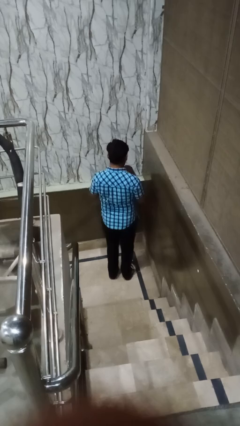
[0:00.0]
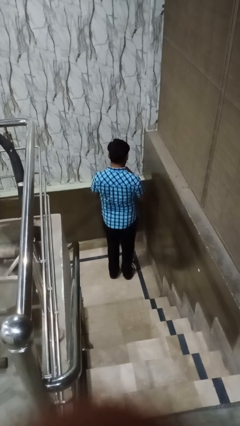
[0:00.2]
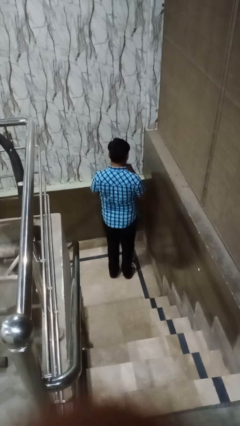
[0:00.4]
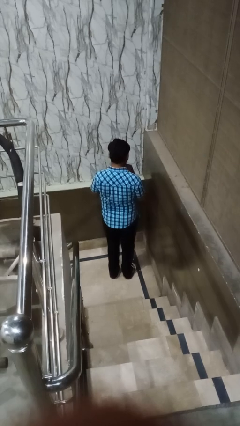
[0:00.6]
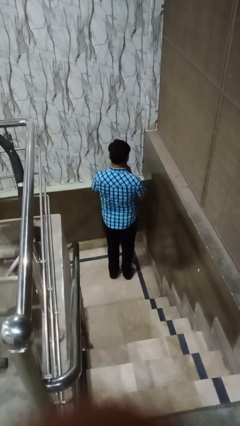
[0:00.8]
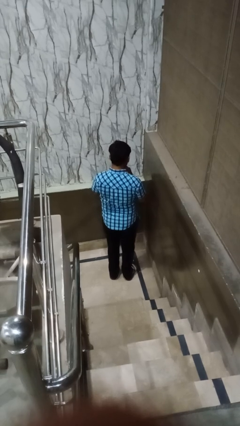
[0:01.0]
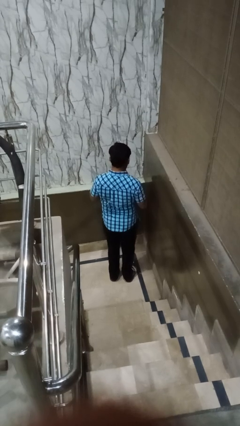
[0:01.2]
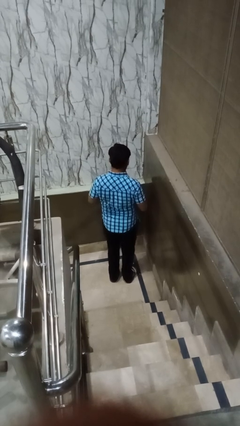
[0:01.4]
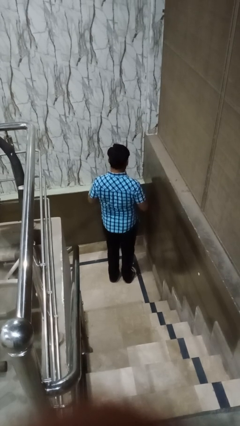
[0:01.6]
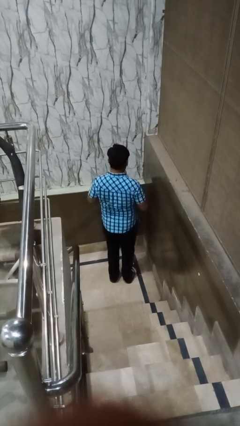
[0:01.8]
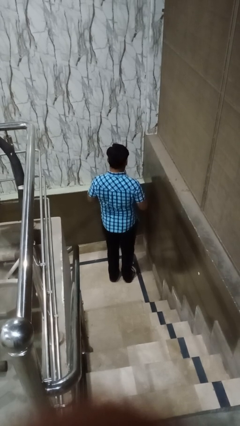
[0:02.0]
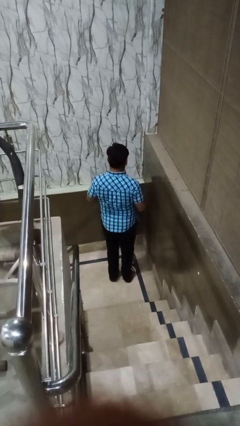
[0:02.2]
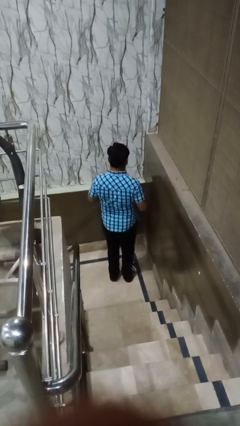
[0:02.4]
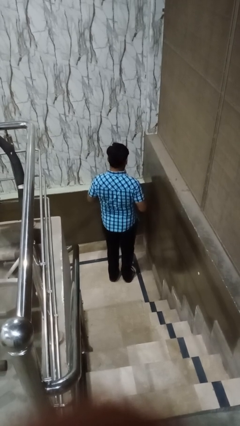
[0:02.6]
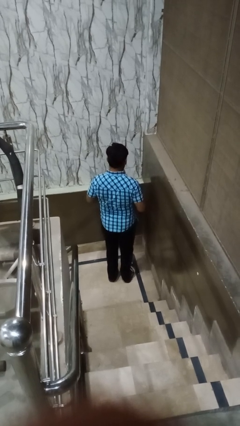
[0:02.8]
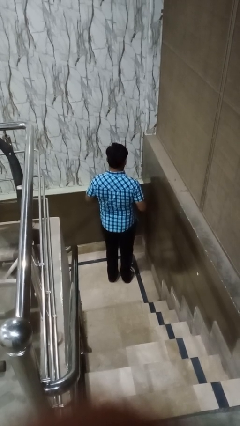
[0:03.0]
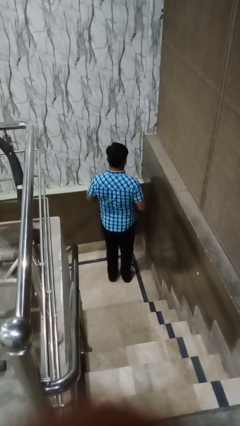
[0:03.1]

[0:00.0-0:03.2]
person buttons shirt

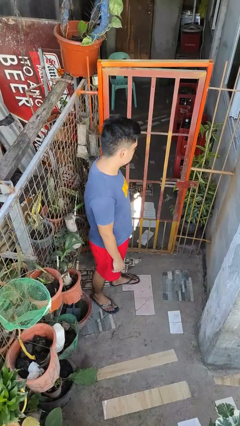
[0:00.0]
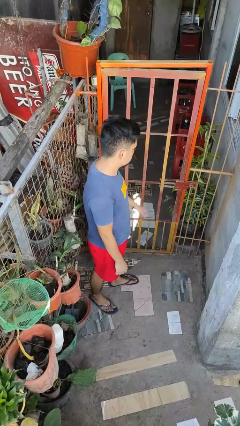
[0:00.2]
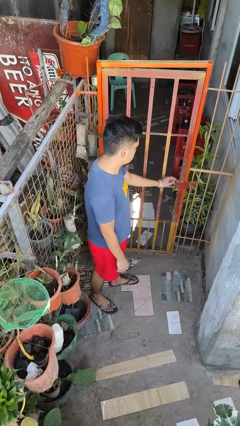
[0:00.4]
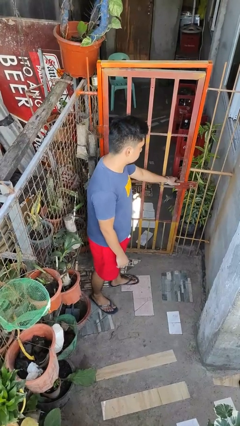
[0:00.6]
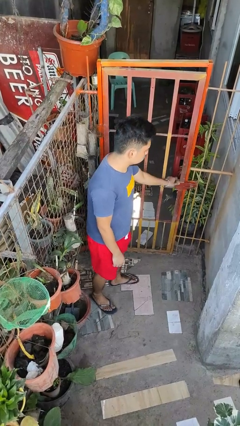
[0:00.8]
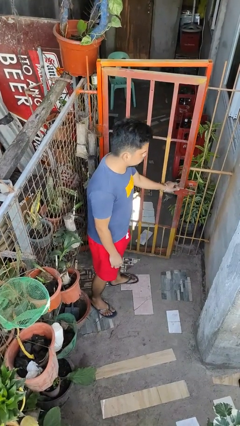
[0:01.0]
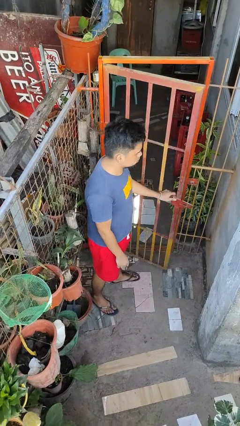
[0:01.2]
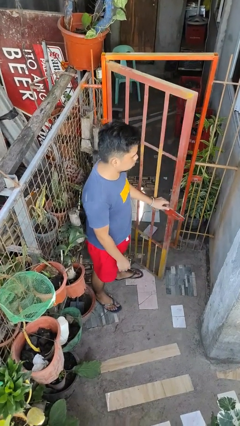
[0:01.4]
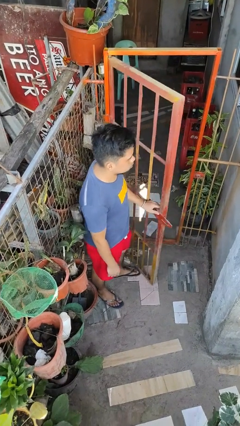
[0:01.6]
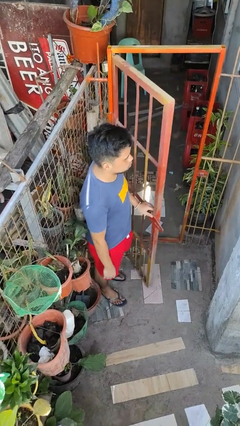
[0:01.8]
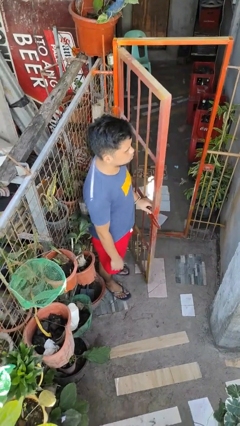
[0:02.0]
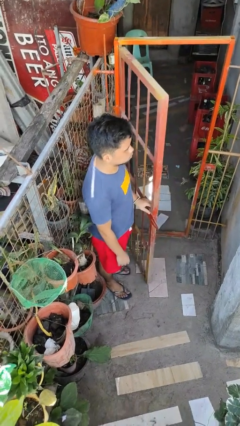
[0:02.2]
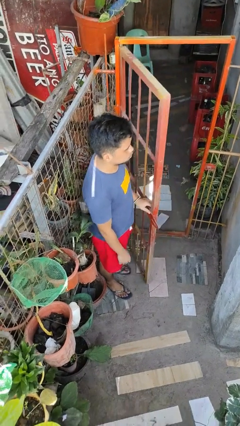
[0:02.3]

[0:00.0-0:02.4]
person opens gate

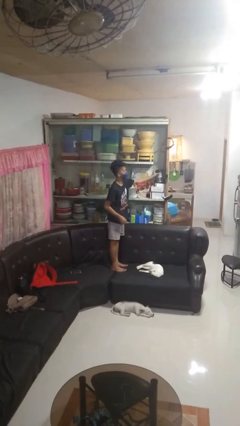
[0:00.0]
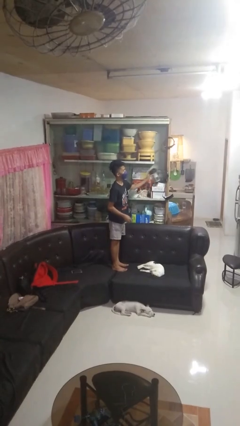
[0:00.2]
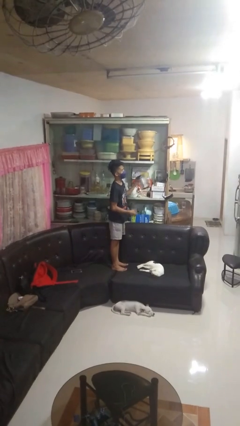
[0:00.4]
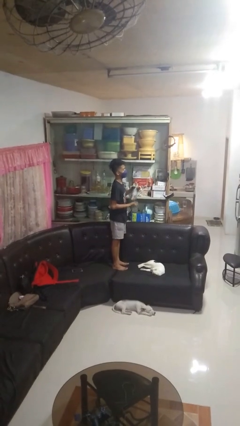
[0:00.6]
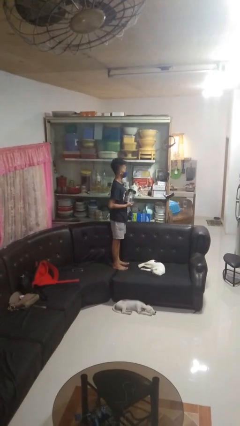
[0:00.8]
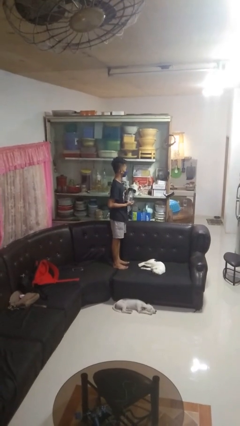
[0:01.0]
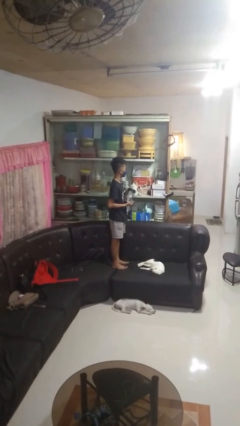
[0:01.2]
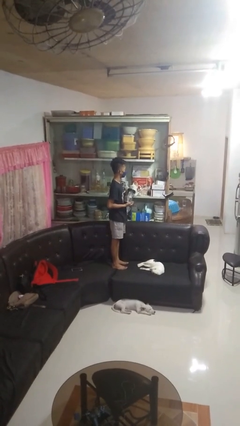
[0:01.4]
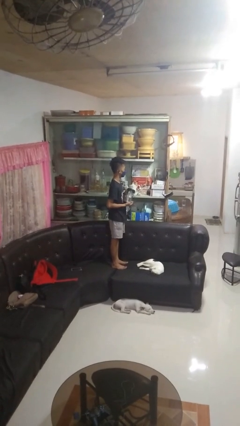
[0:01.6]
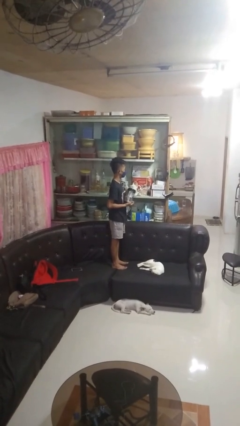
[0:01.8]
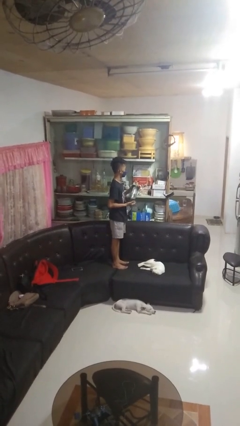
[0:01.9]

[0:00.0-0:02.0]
person picks up object from cabinet

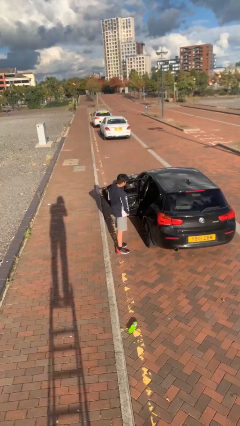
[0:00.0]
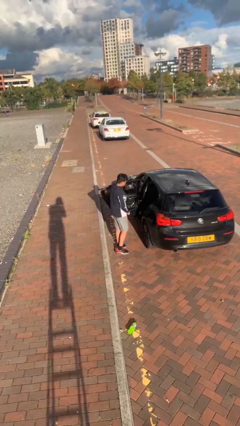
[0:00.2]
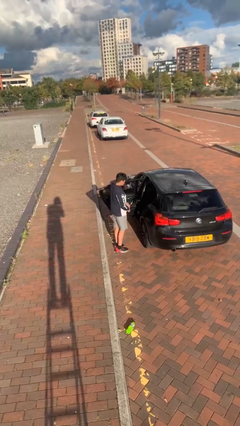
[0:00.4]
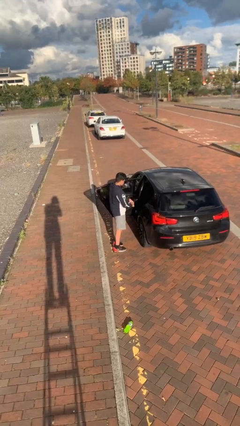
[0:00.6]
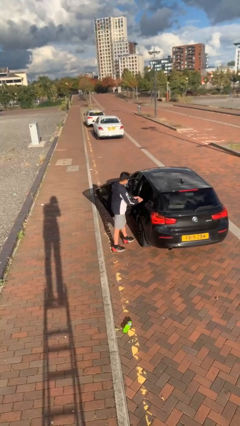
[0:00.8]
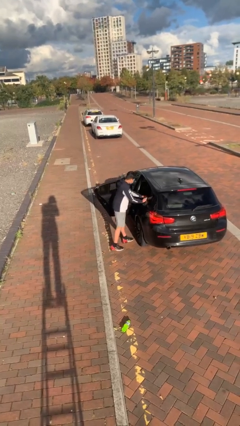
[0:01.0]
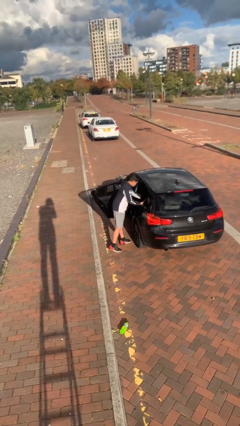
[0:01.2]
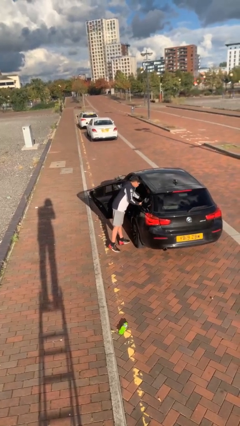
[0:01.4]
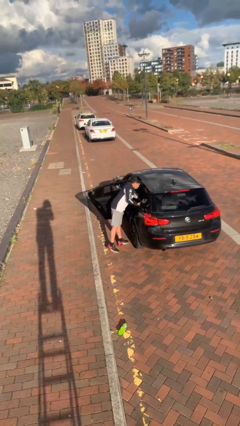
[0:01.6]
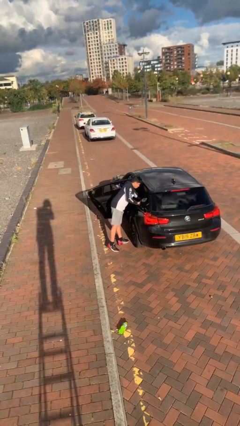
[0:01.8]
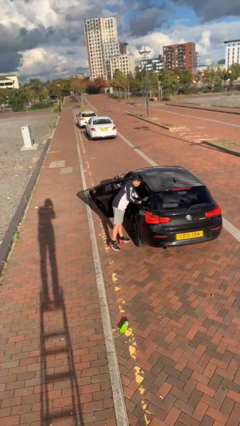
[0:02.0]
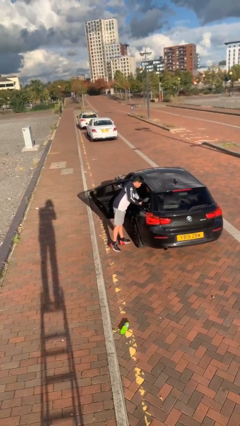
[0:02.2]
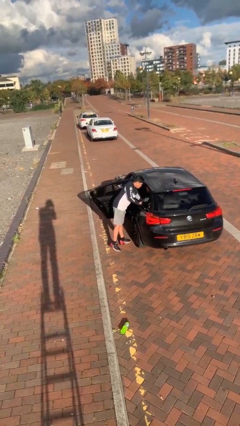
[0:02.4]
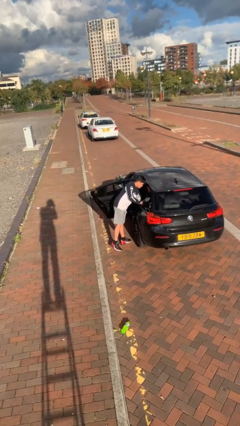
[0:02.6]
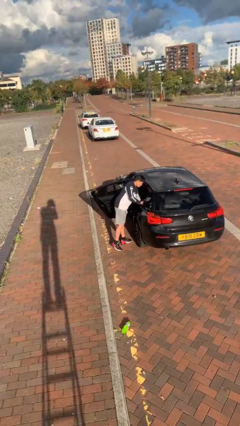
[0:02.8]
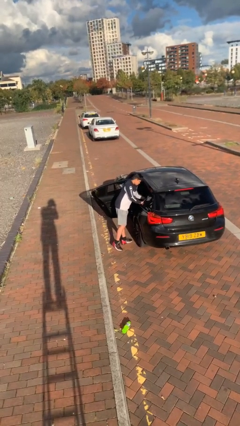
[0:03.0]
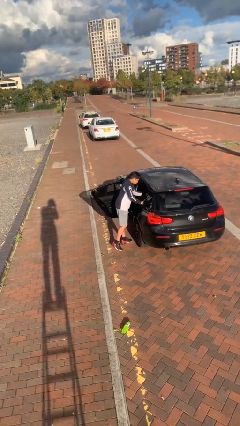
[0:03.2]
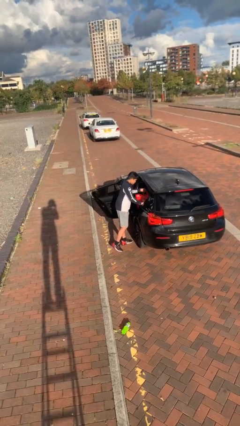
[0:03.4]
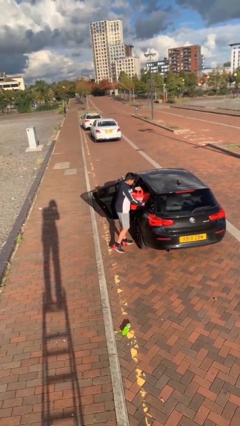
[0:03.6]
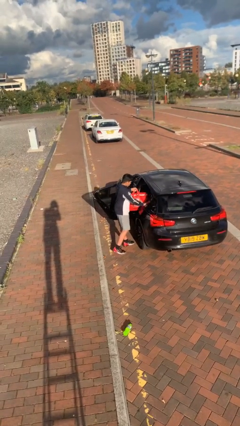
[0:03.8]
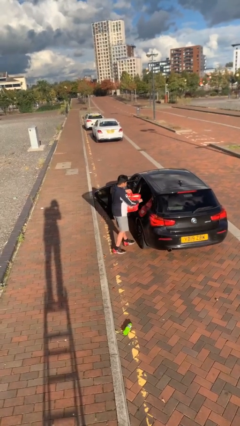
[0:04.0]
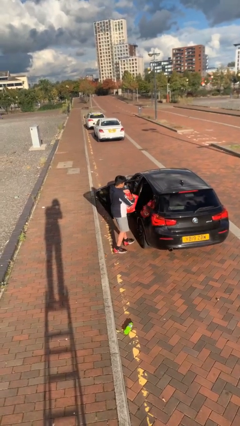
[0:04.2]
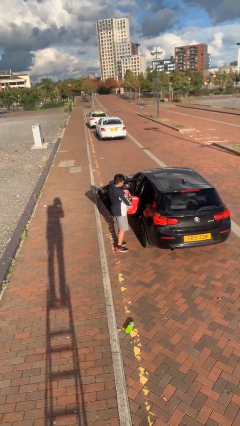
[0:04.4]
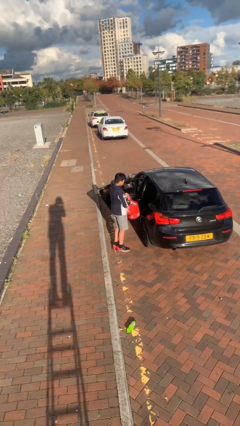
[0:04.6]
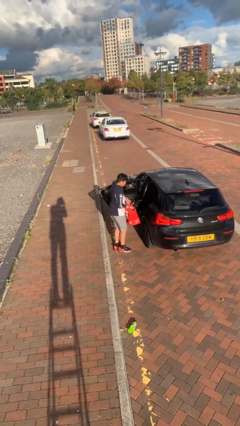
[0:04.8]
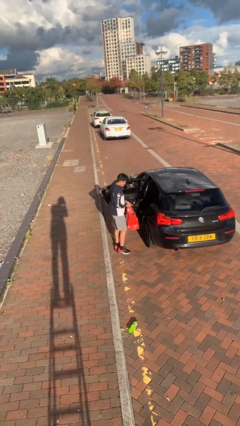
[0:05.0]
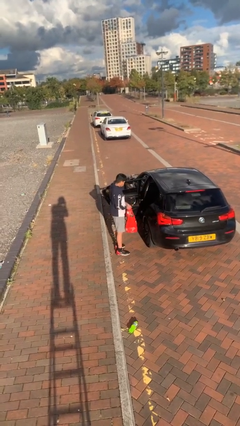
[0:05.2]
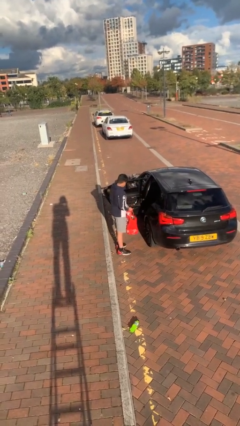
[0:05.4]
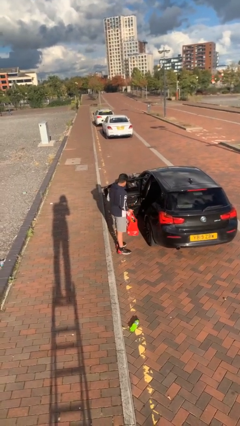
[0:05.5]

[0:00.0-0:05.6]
person unloads car

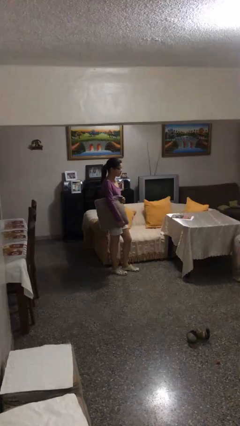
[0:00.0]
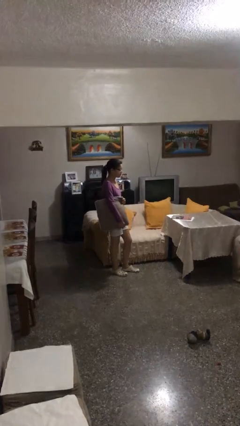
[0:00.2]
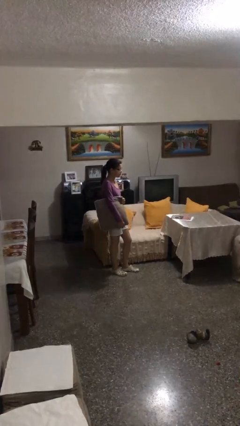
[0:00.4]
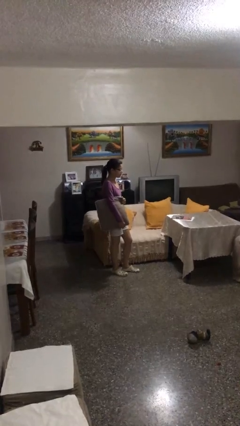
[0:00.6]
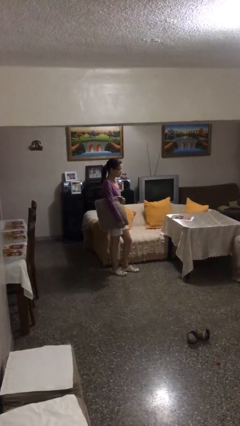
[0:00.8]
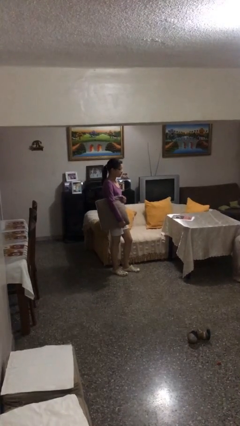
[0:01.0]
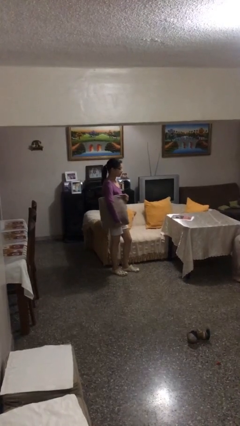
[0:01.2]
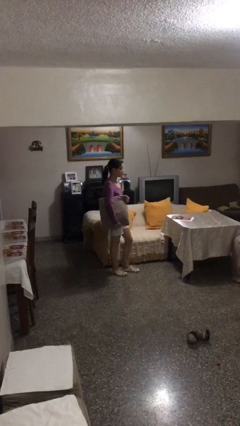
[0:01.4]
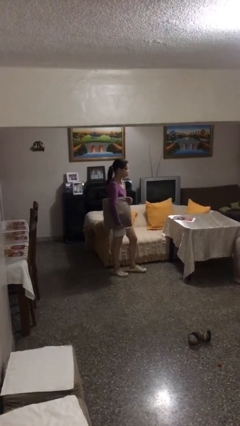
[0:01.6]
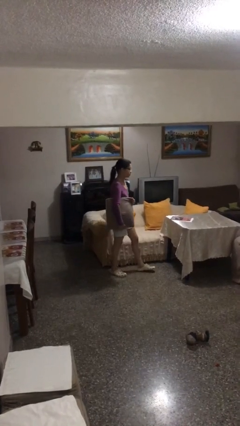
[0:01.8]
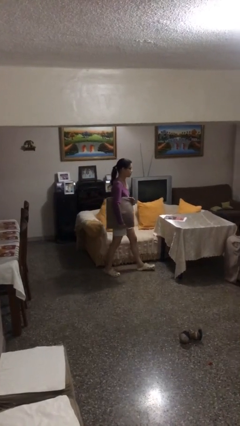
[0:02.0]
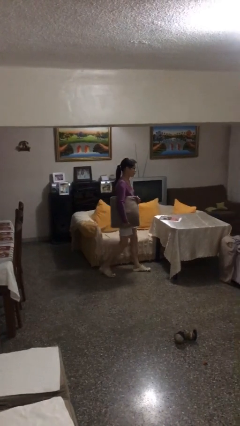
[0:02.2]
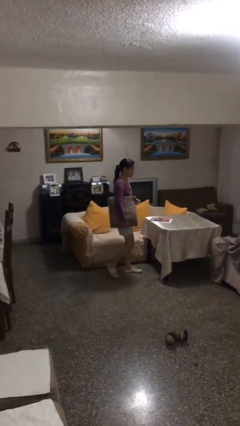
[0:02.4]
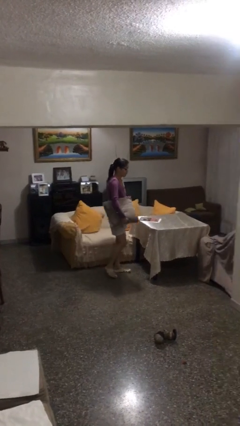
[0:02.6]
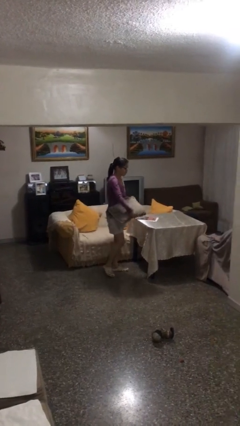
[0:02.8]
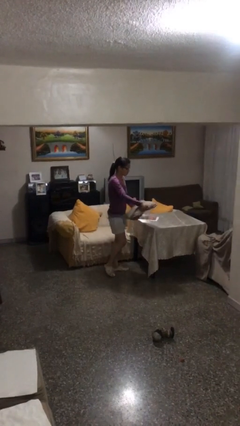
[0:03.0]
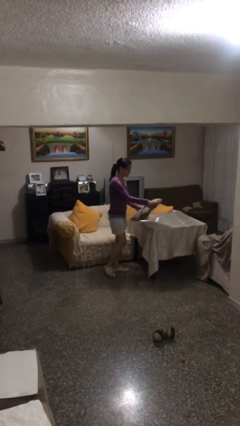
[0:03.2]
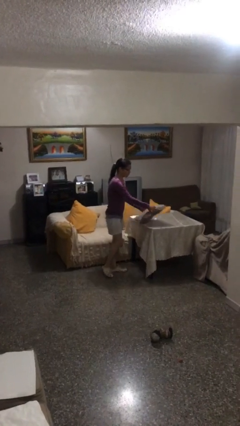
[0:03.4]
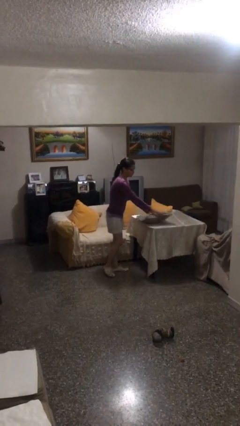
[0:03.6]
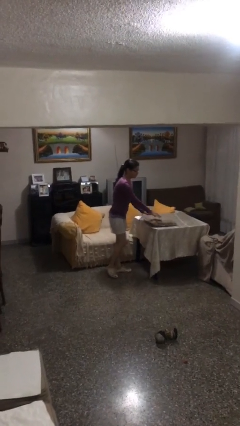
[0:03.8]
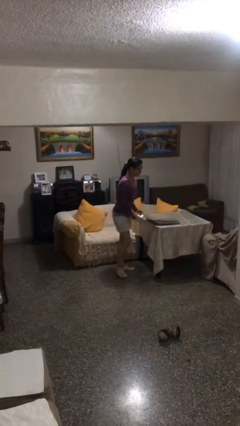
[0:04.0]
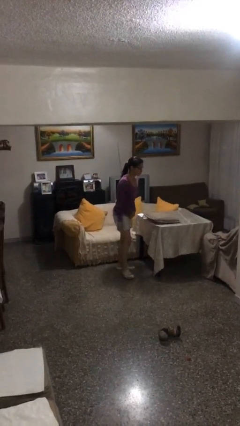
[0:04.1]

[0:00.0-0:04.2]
person puts down object on table

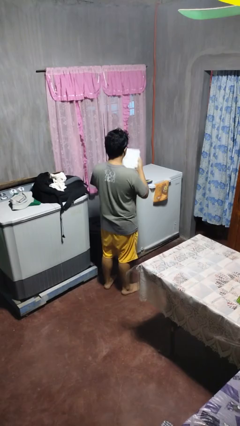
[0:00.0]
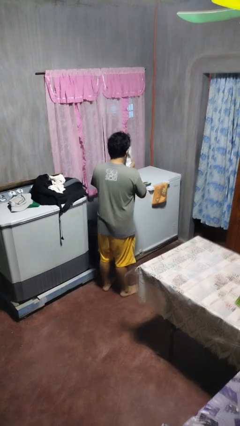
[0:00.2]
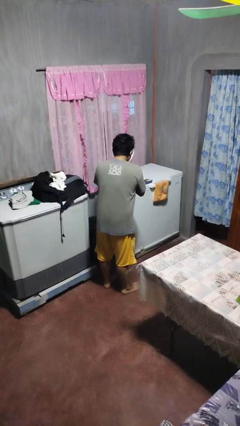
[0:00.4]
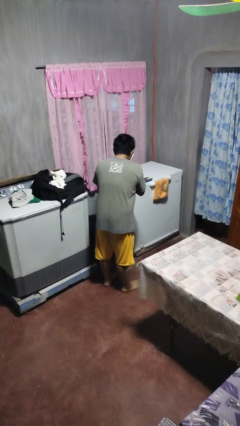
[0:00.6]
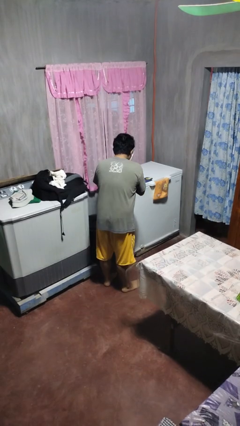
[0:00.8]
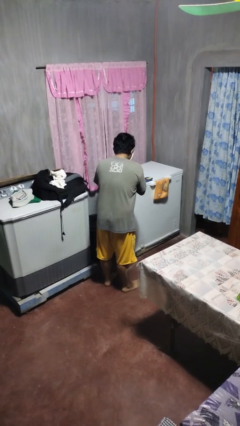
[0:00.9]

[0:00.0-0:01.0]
person blows nose
